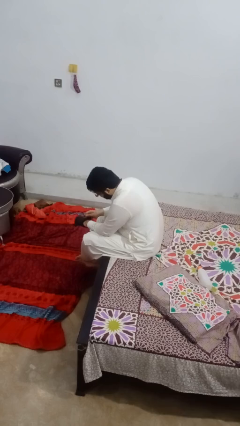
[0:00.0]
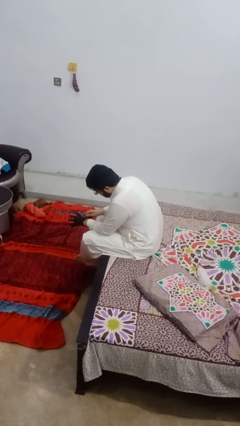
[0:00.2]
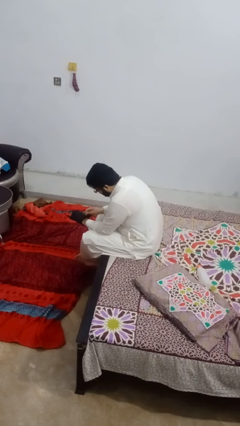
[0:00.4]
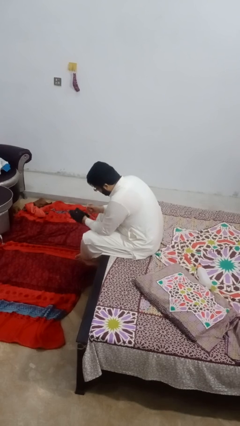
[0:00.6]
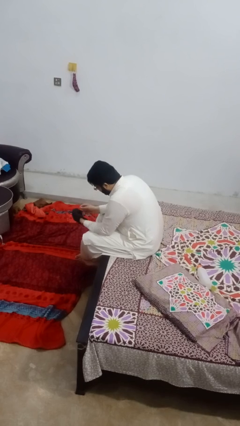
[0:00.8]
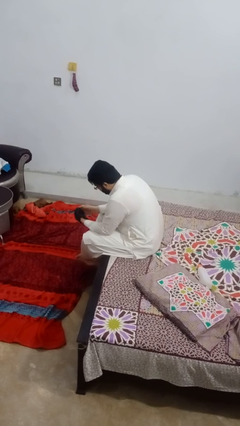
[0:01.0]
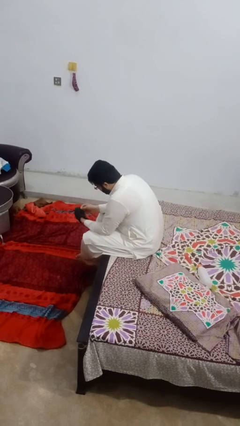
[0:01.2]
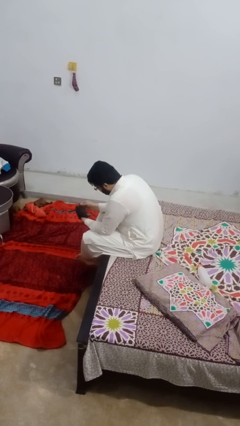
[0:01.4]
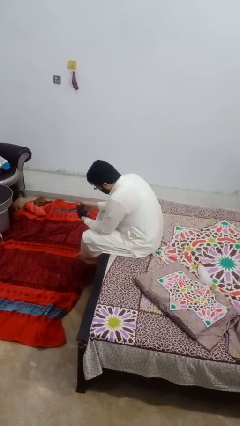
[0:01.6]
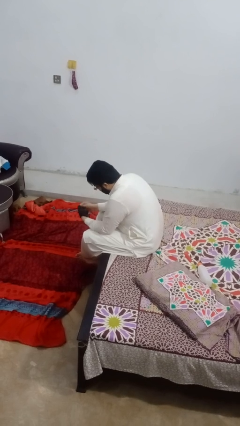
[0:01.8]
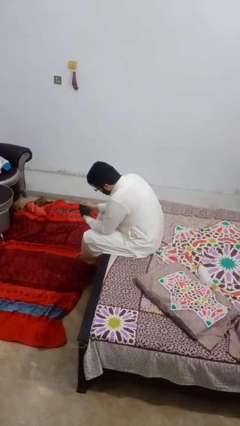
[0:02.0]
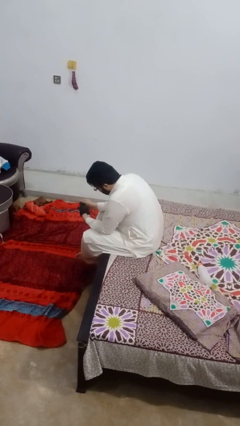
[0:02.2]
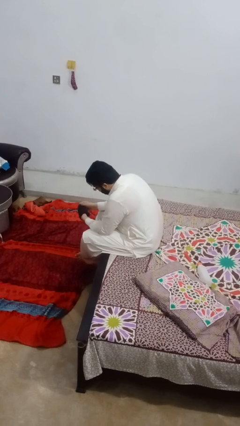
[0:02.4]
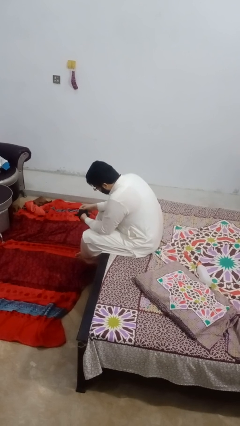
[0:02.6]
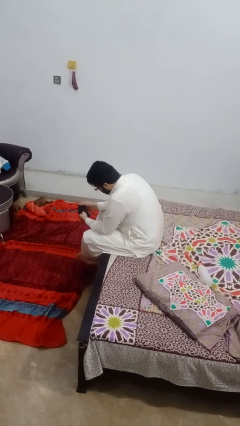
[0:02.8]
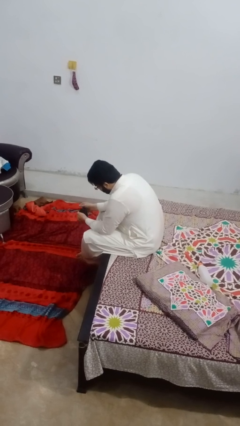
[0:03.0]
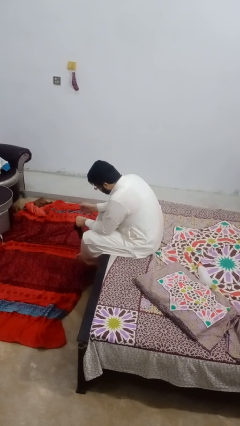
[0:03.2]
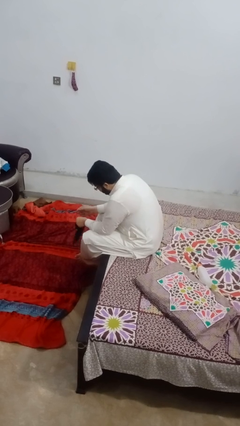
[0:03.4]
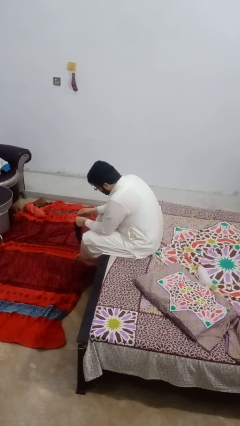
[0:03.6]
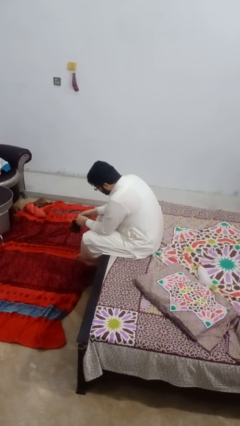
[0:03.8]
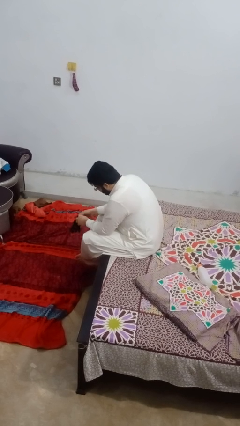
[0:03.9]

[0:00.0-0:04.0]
person takes off gloves

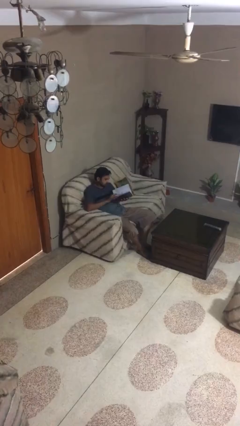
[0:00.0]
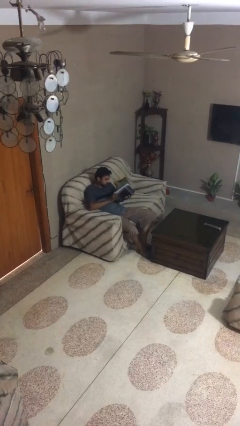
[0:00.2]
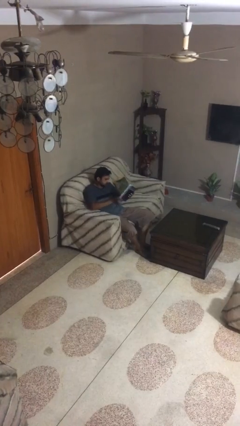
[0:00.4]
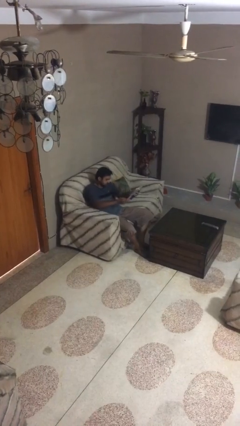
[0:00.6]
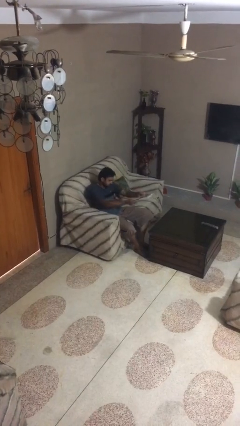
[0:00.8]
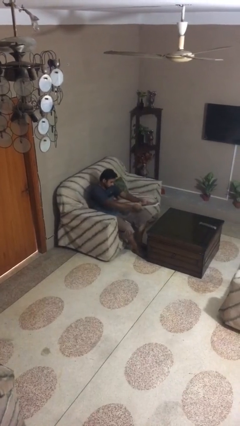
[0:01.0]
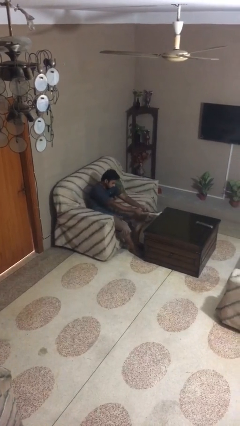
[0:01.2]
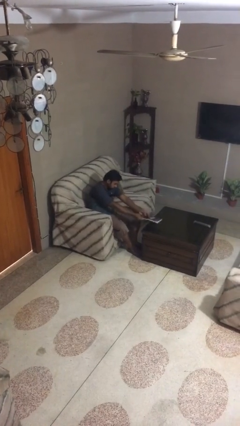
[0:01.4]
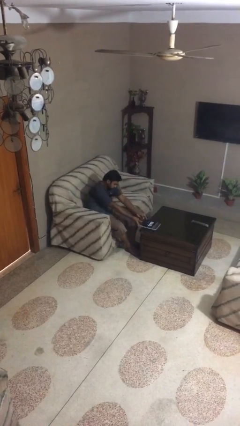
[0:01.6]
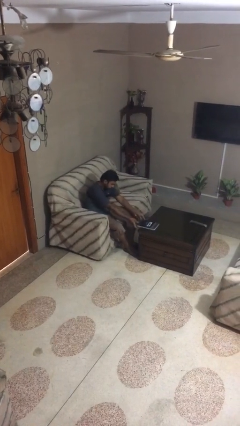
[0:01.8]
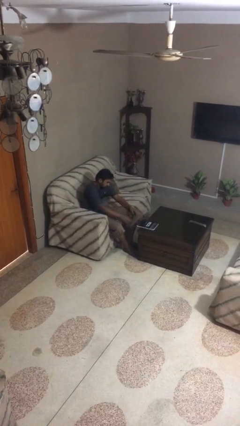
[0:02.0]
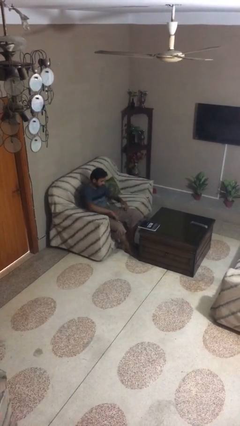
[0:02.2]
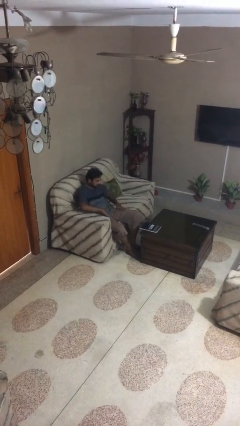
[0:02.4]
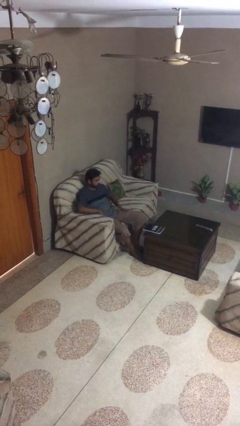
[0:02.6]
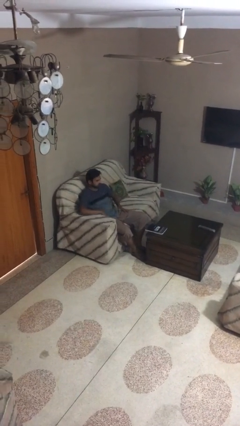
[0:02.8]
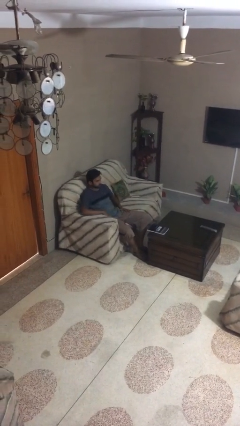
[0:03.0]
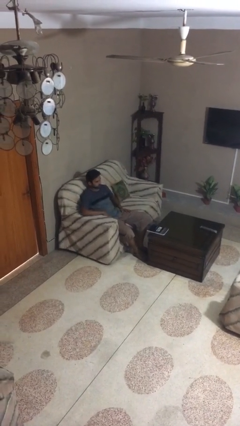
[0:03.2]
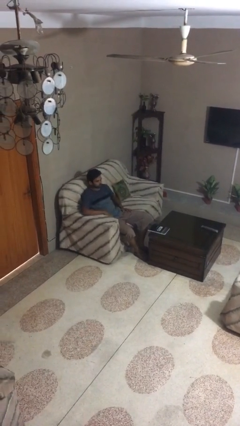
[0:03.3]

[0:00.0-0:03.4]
person puts down object on table

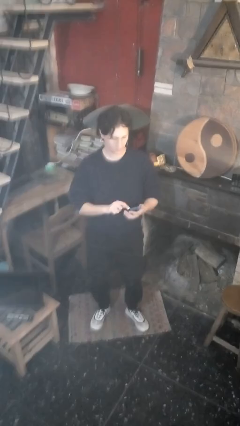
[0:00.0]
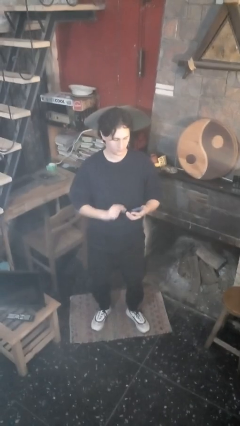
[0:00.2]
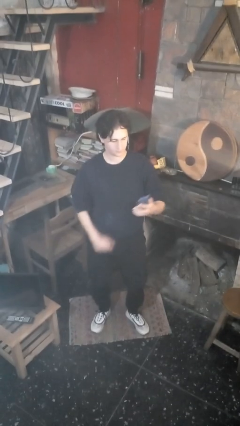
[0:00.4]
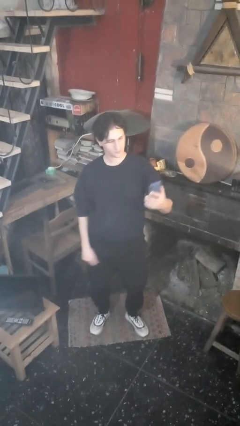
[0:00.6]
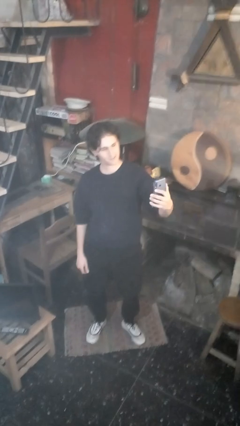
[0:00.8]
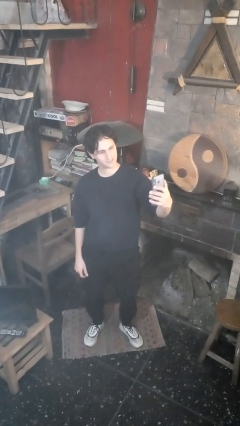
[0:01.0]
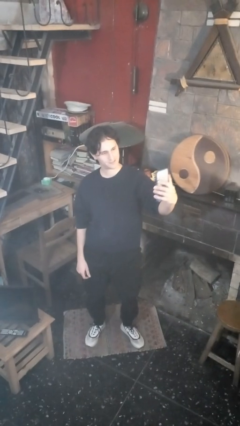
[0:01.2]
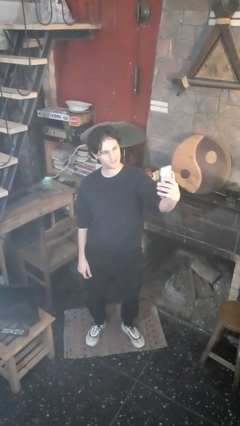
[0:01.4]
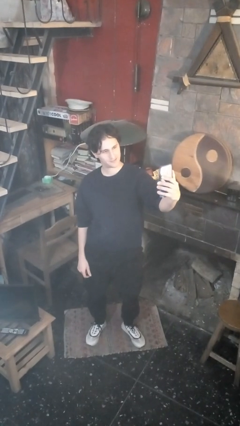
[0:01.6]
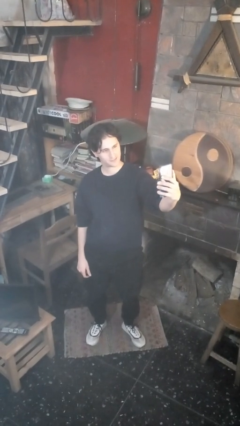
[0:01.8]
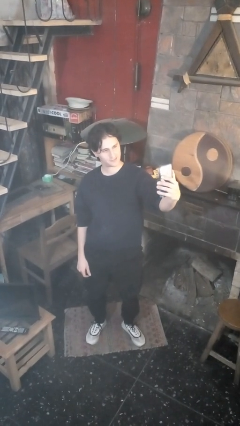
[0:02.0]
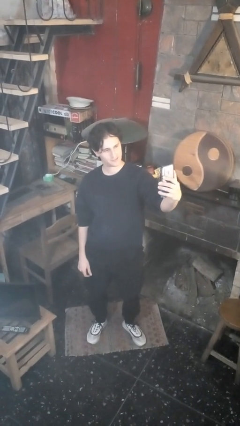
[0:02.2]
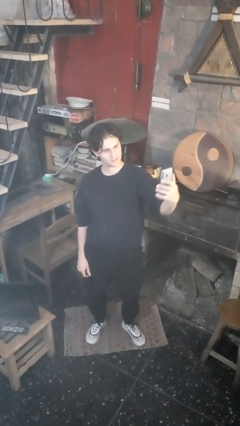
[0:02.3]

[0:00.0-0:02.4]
person takes selfie

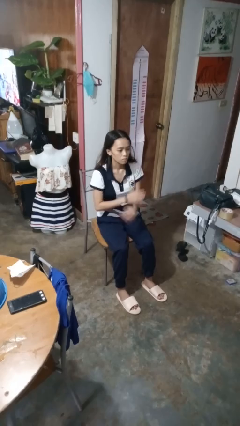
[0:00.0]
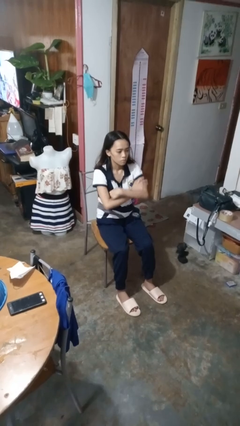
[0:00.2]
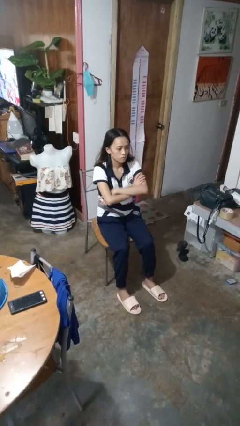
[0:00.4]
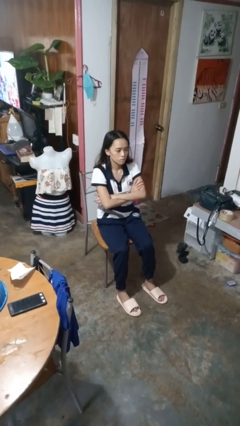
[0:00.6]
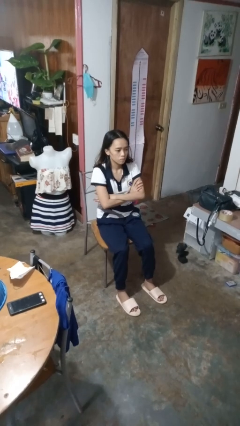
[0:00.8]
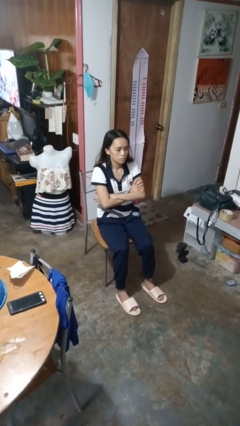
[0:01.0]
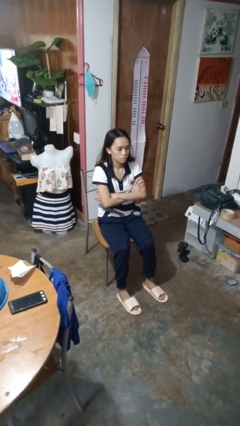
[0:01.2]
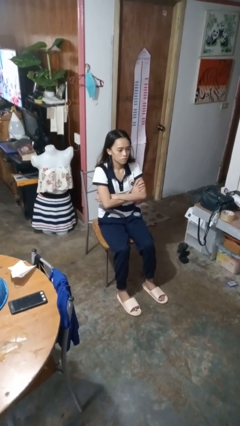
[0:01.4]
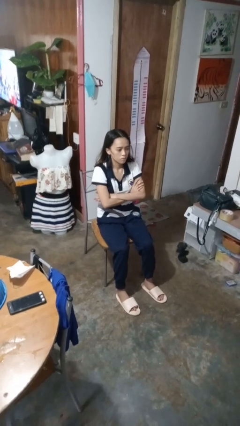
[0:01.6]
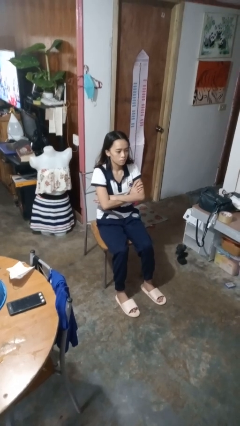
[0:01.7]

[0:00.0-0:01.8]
person crosses arms

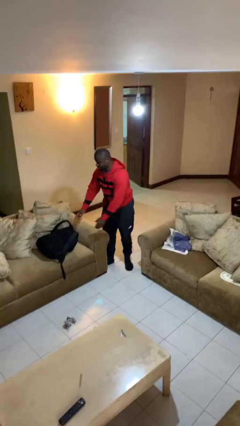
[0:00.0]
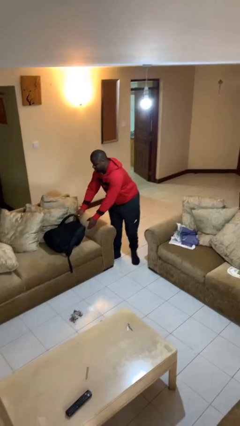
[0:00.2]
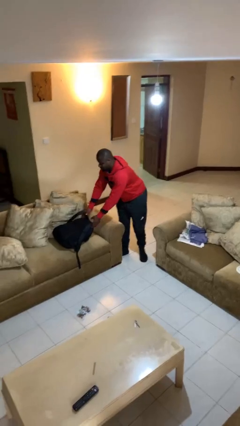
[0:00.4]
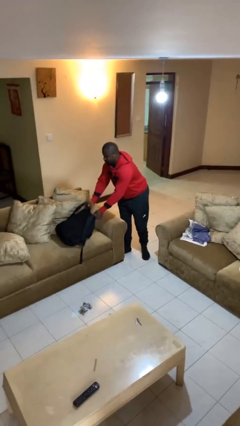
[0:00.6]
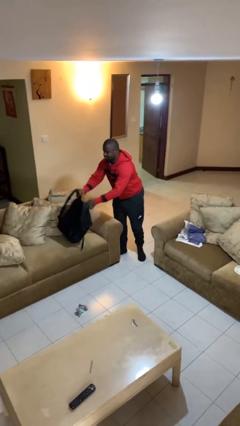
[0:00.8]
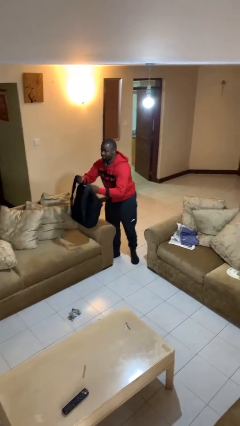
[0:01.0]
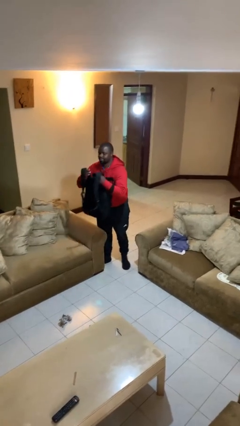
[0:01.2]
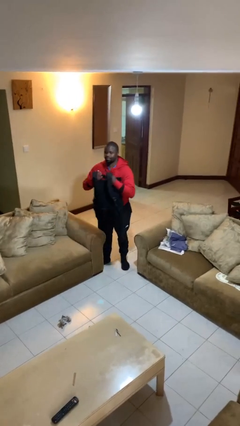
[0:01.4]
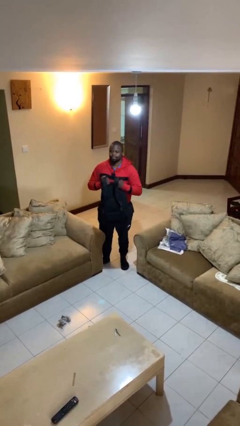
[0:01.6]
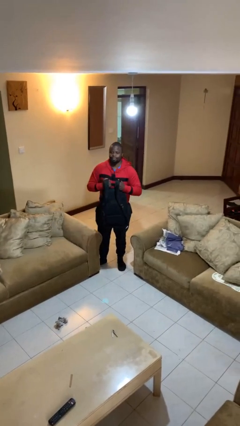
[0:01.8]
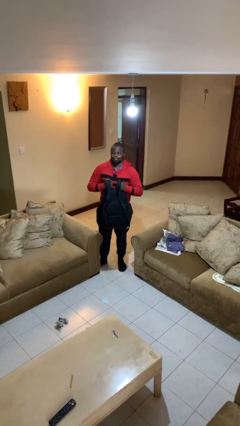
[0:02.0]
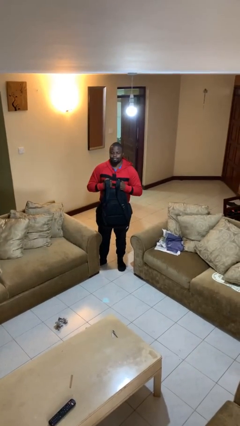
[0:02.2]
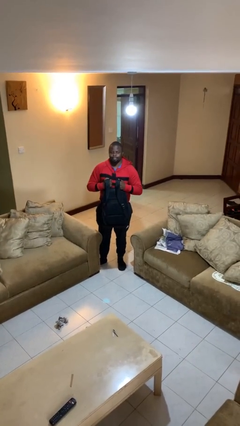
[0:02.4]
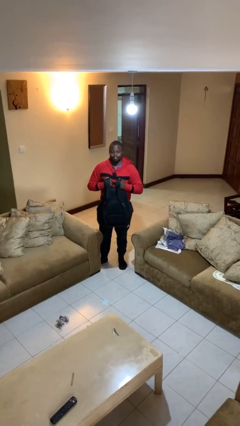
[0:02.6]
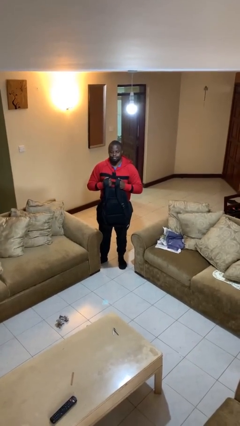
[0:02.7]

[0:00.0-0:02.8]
person picks up object from couch

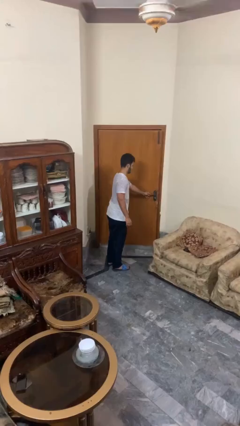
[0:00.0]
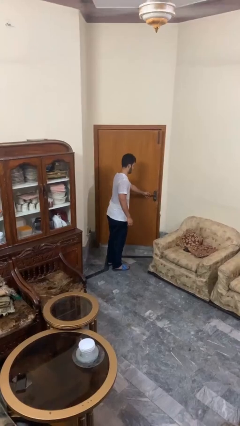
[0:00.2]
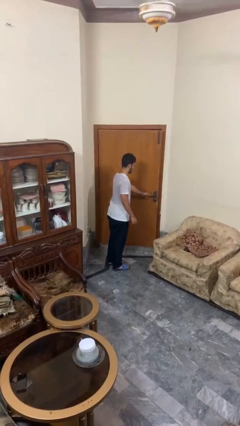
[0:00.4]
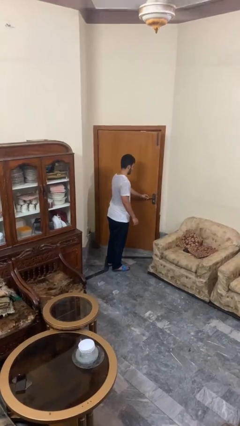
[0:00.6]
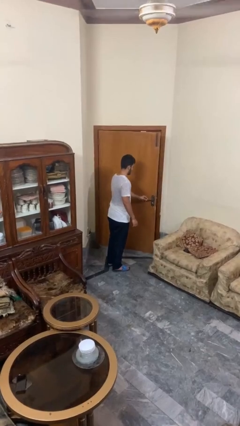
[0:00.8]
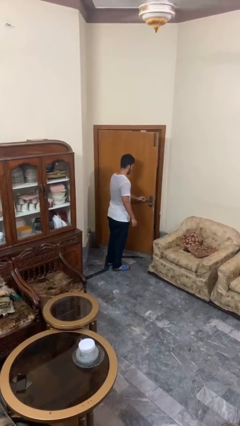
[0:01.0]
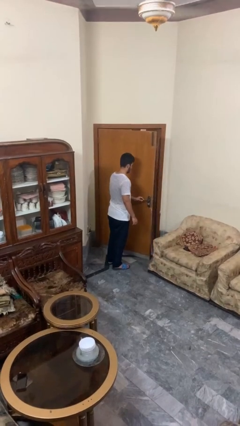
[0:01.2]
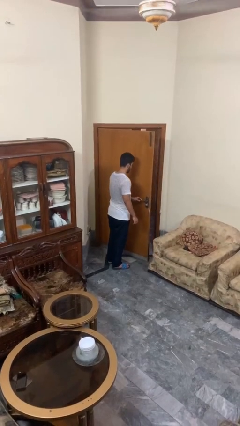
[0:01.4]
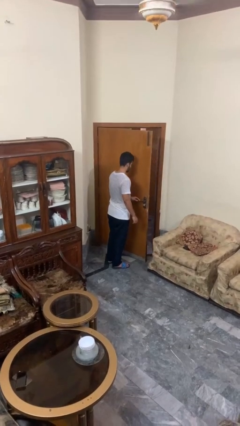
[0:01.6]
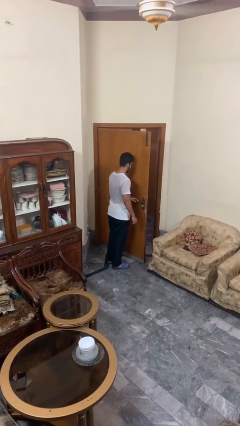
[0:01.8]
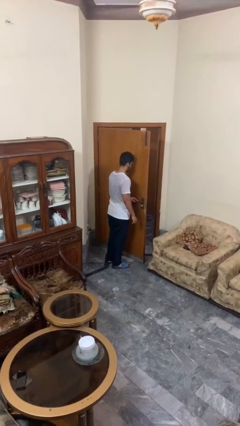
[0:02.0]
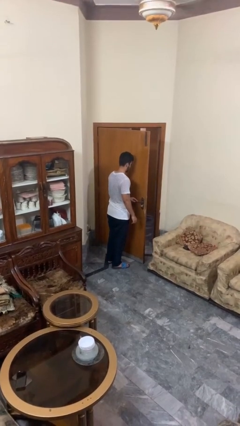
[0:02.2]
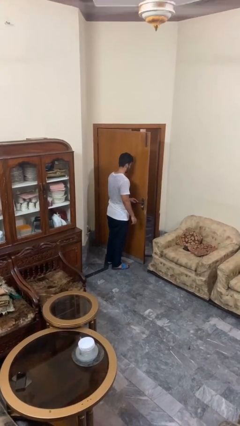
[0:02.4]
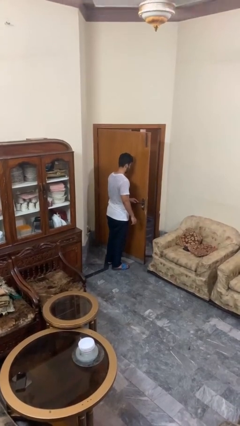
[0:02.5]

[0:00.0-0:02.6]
person opens facility door

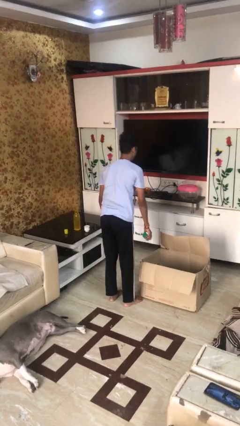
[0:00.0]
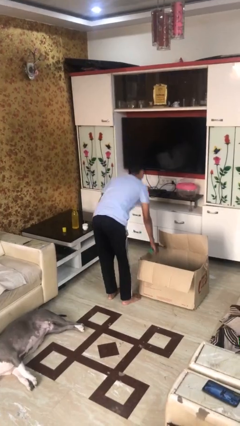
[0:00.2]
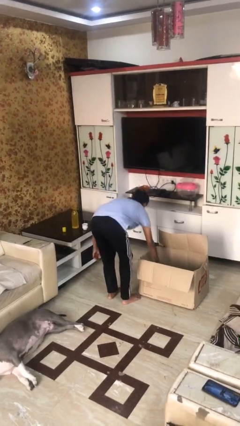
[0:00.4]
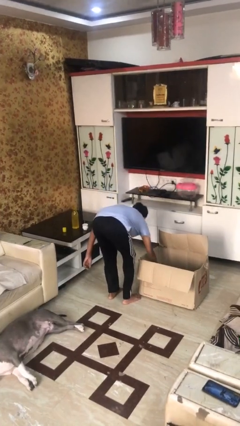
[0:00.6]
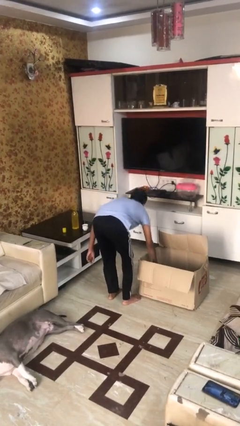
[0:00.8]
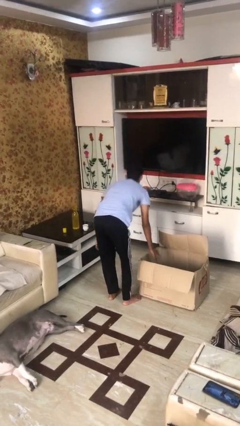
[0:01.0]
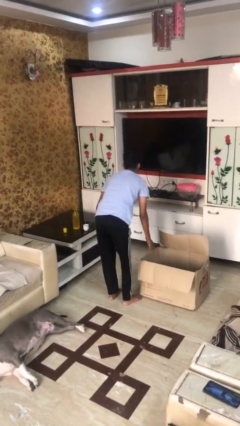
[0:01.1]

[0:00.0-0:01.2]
person puts object into box
